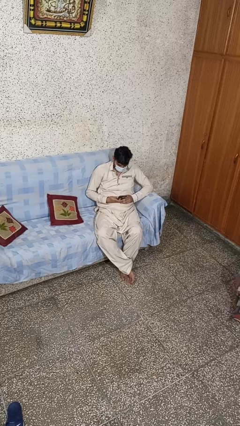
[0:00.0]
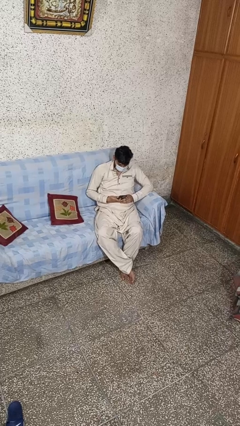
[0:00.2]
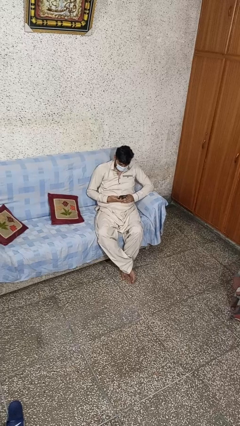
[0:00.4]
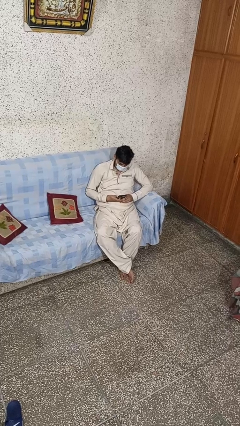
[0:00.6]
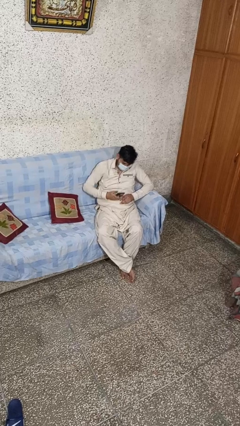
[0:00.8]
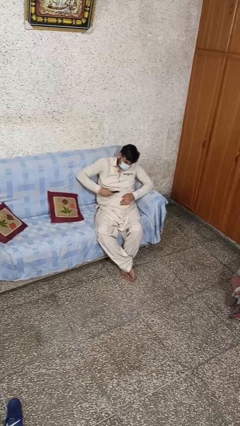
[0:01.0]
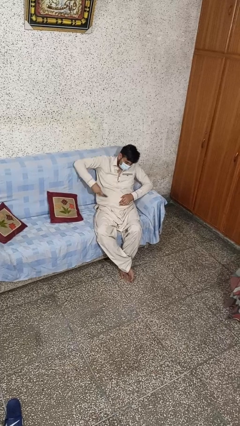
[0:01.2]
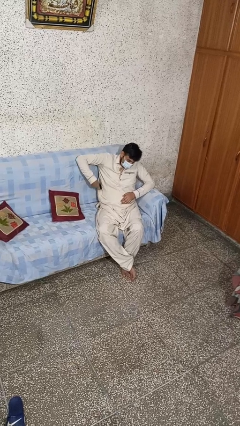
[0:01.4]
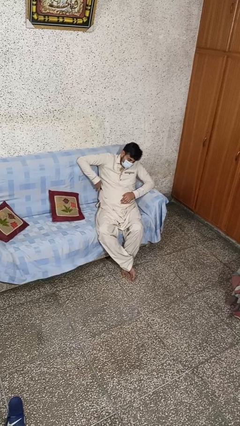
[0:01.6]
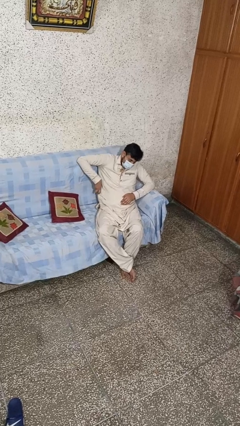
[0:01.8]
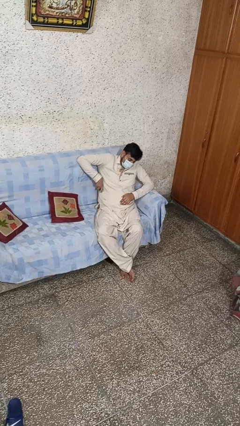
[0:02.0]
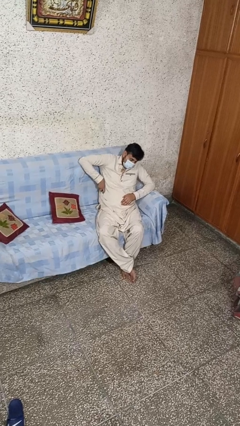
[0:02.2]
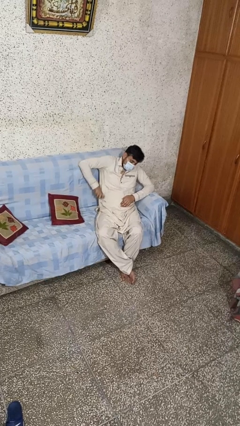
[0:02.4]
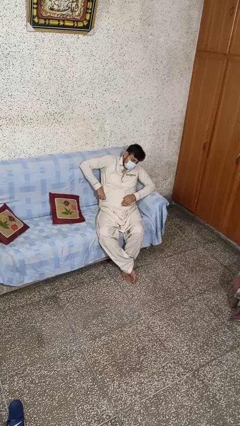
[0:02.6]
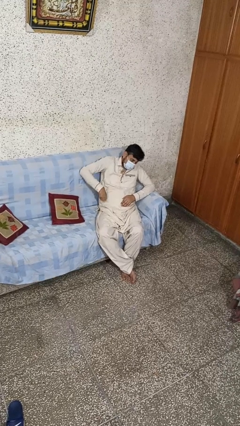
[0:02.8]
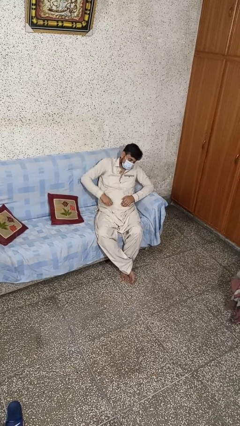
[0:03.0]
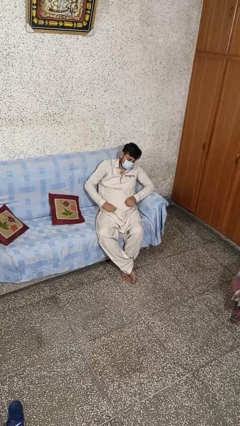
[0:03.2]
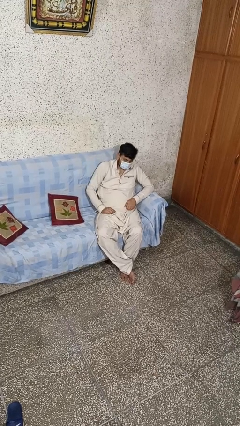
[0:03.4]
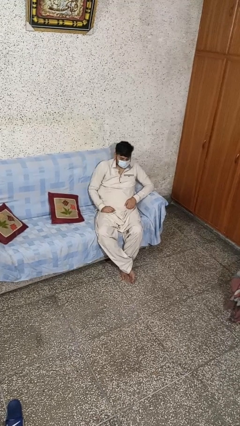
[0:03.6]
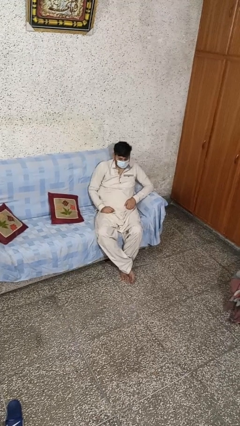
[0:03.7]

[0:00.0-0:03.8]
person puts phone into pocket

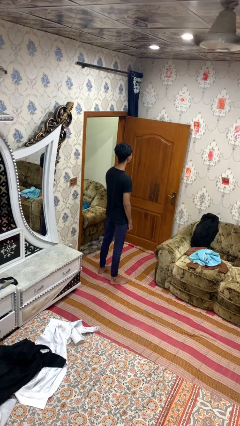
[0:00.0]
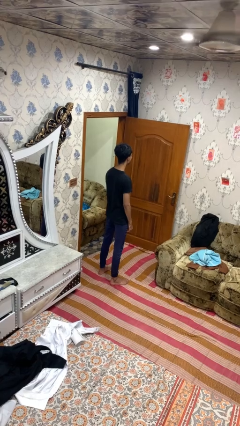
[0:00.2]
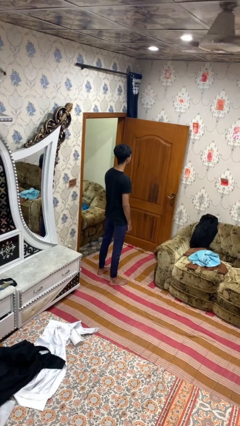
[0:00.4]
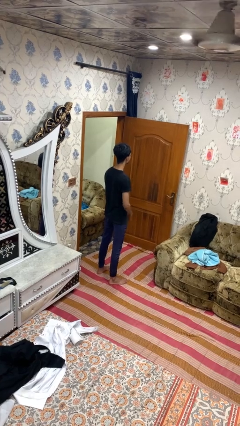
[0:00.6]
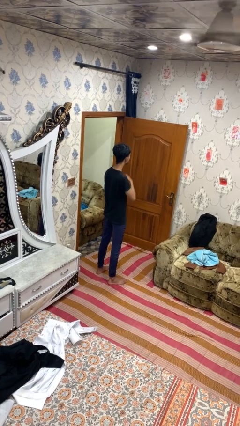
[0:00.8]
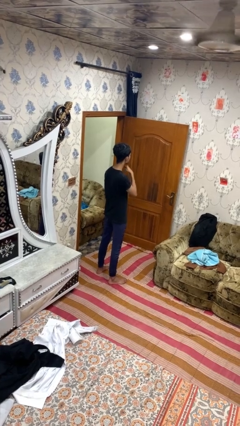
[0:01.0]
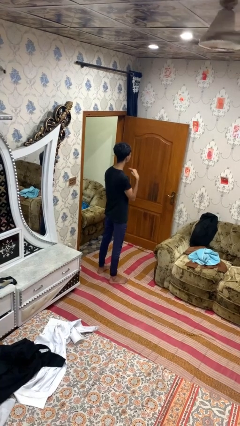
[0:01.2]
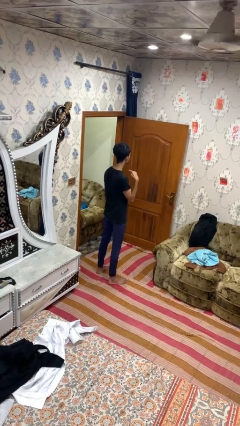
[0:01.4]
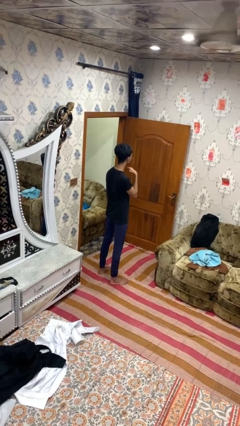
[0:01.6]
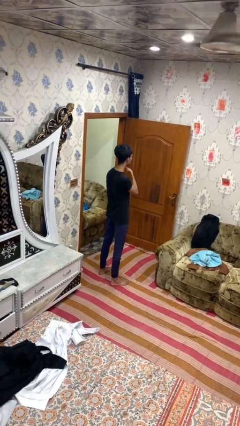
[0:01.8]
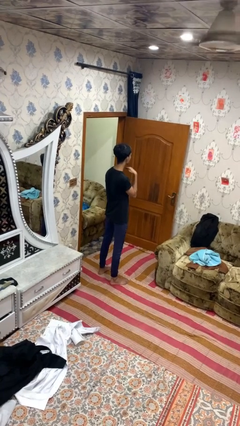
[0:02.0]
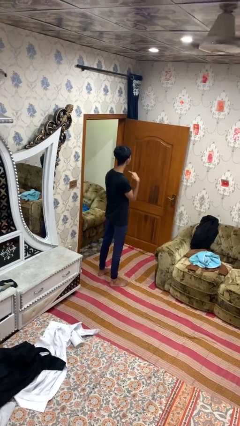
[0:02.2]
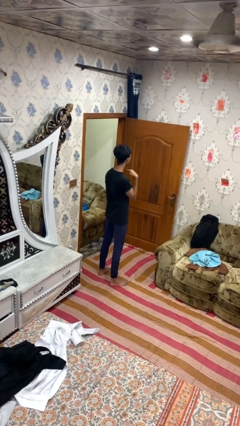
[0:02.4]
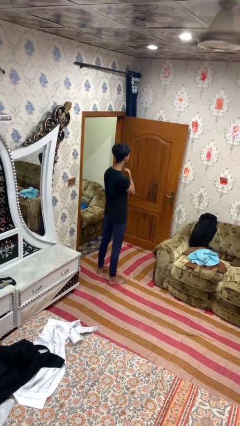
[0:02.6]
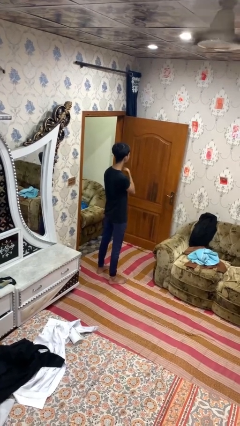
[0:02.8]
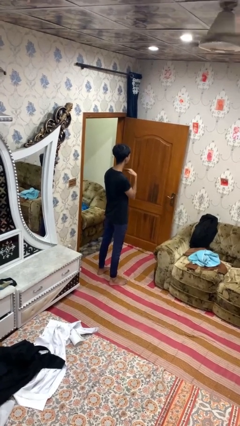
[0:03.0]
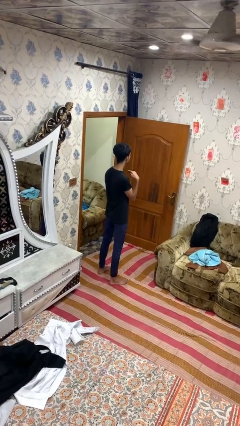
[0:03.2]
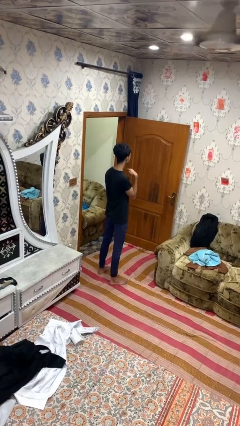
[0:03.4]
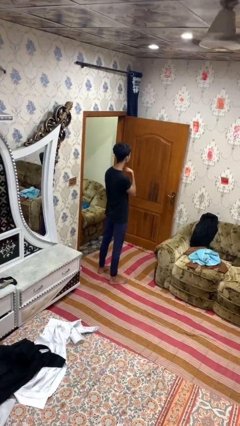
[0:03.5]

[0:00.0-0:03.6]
person gestures cut

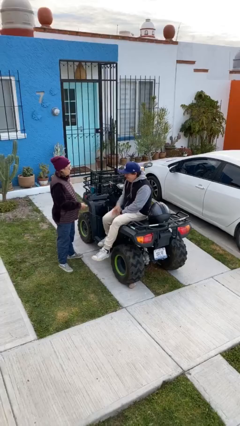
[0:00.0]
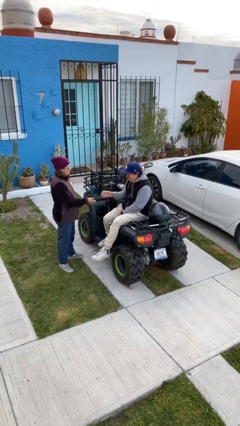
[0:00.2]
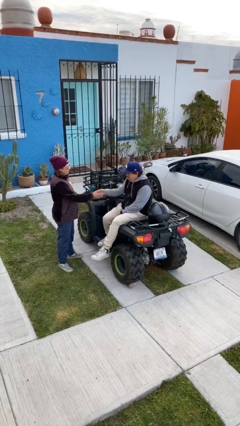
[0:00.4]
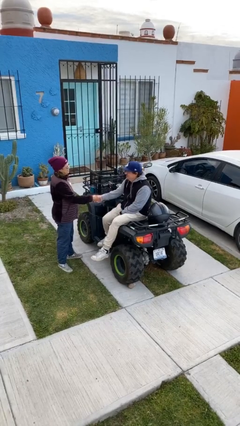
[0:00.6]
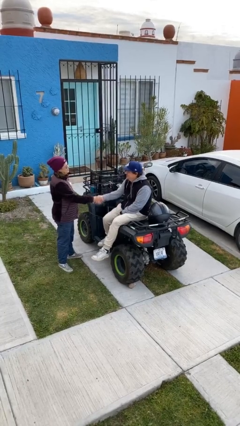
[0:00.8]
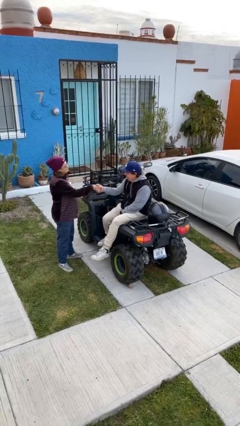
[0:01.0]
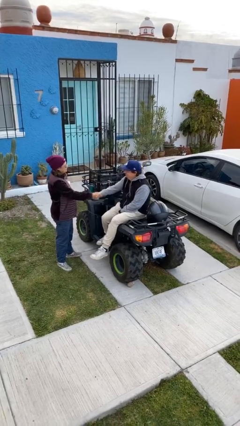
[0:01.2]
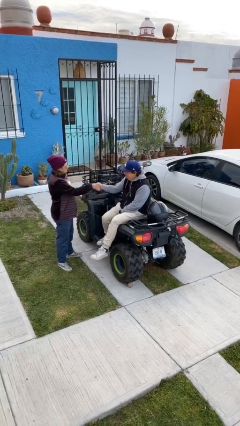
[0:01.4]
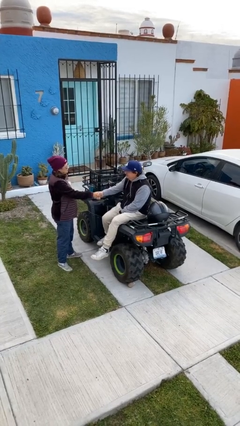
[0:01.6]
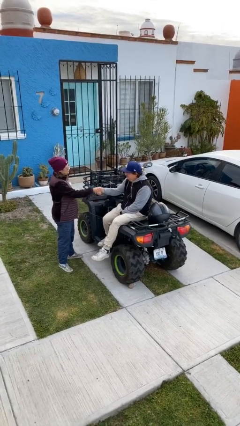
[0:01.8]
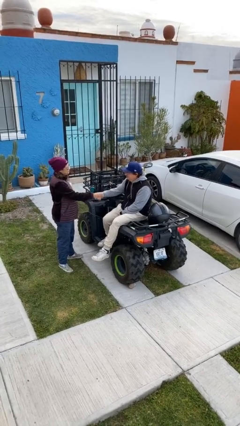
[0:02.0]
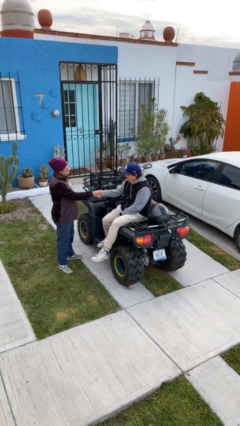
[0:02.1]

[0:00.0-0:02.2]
person shakes hand

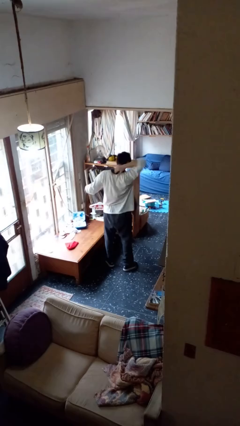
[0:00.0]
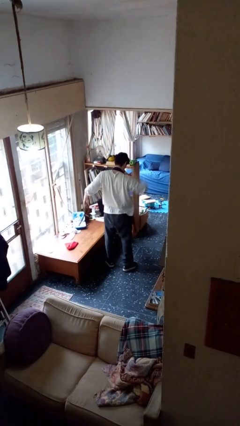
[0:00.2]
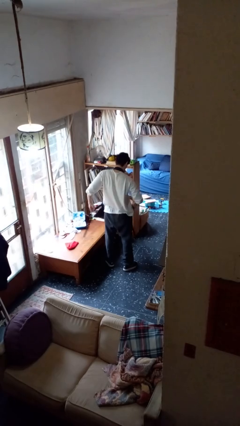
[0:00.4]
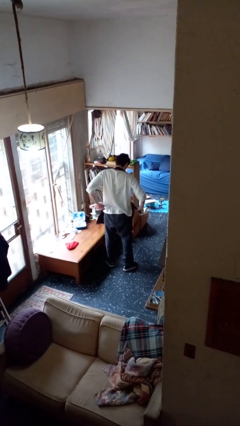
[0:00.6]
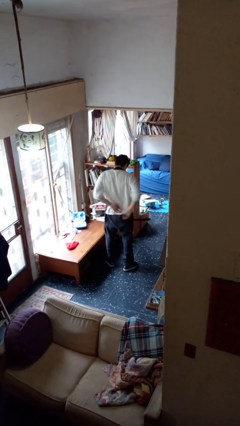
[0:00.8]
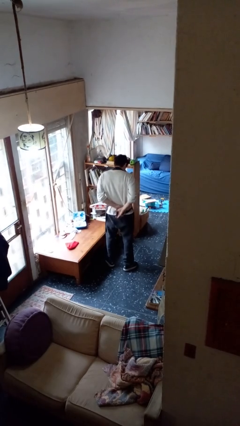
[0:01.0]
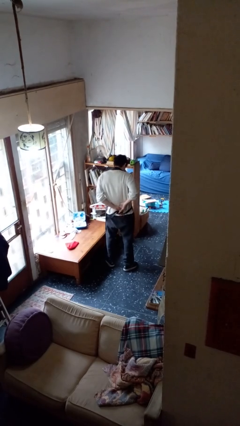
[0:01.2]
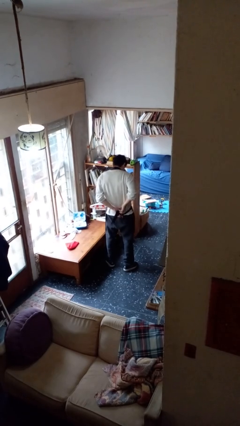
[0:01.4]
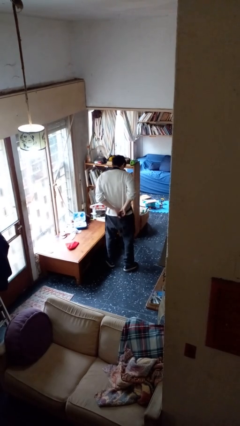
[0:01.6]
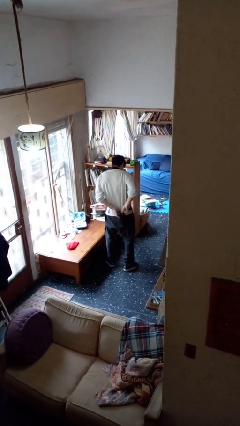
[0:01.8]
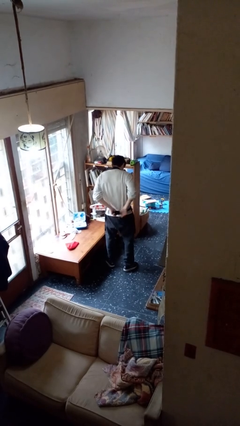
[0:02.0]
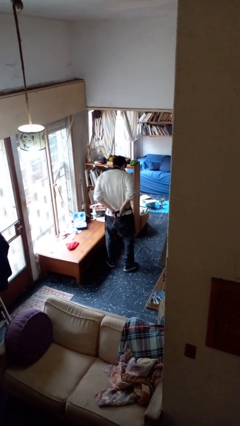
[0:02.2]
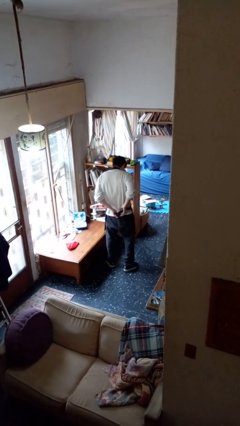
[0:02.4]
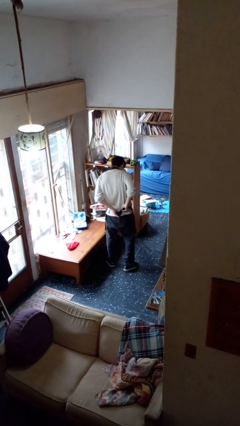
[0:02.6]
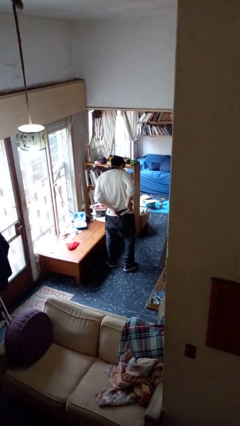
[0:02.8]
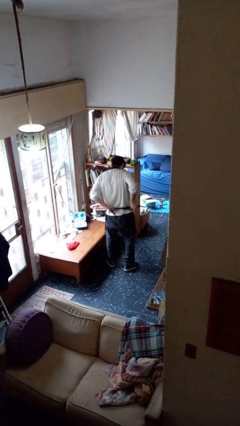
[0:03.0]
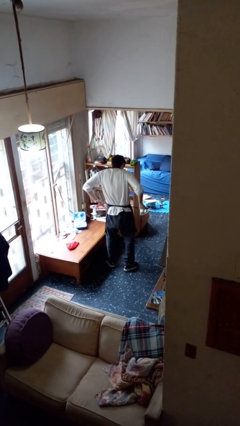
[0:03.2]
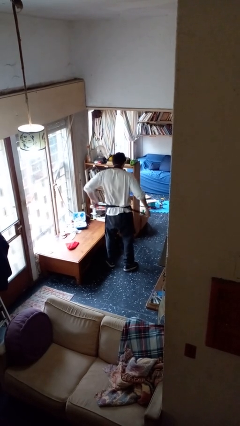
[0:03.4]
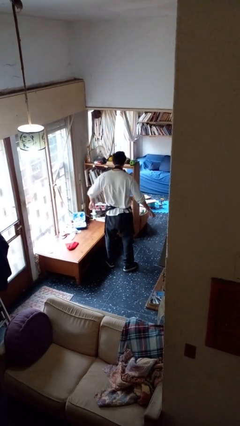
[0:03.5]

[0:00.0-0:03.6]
person puts on apron

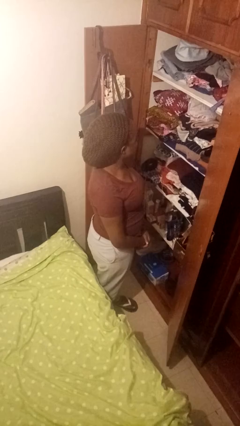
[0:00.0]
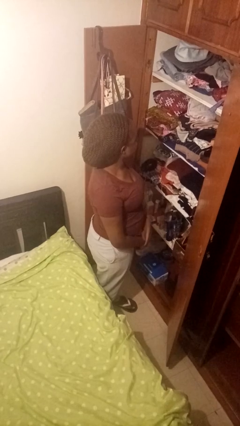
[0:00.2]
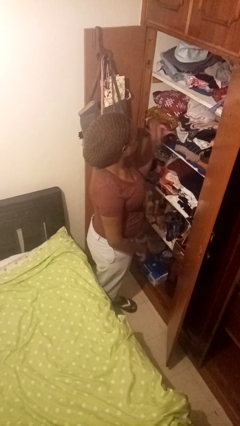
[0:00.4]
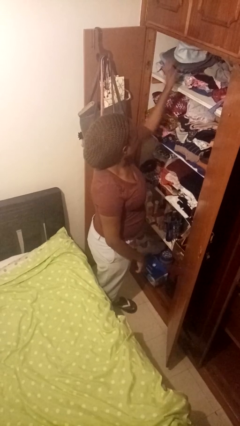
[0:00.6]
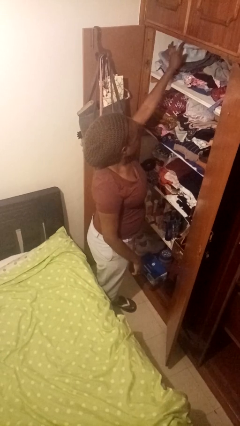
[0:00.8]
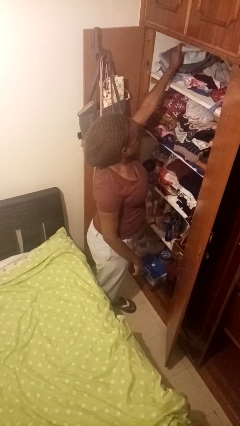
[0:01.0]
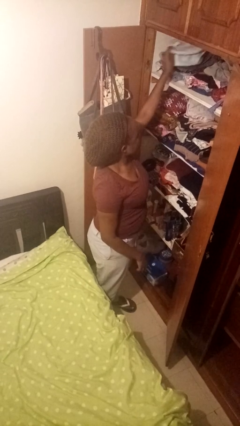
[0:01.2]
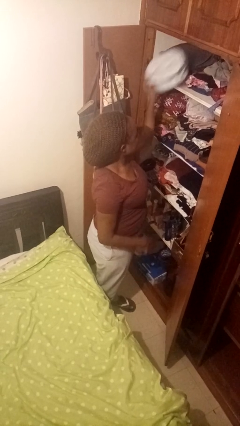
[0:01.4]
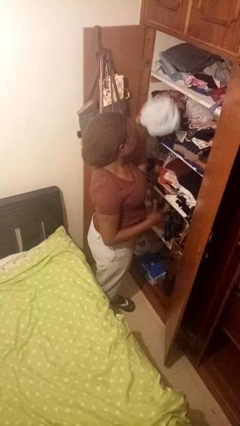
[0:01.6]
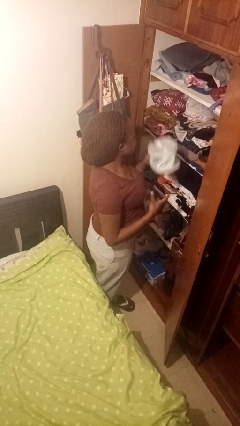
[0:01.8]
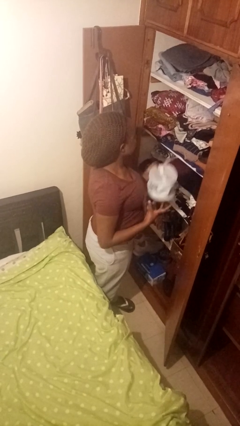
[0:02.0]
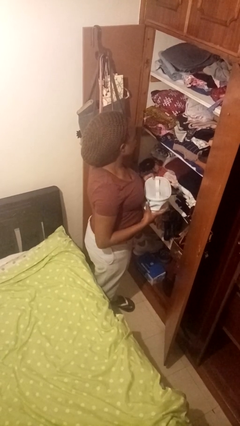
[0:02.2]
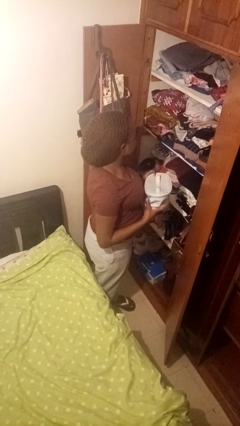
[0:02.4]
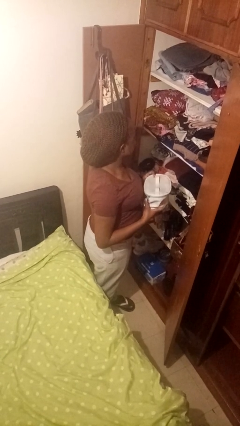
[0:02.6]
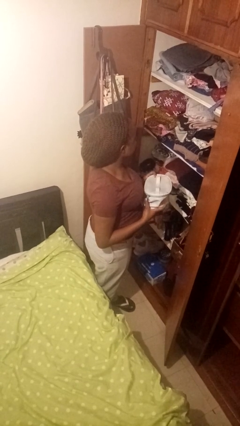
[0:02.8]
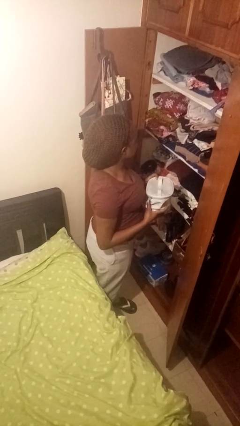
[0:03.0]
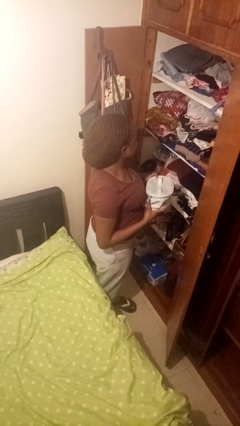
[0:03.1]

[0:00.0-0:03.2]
person picks up object from shelf

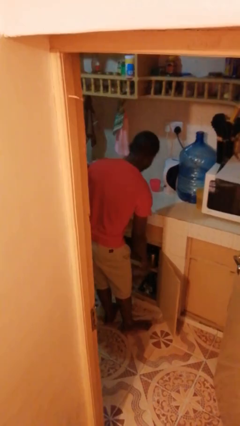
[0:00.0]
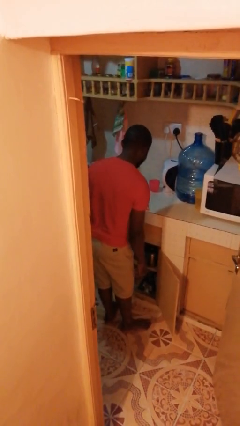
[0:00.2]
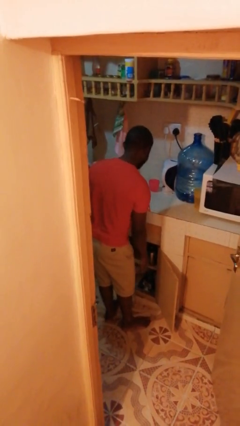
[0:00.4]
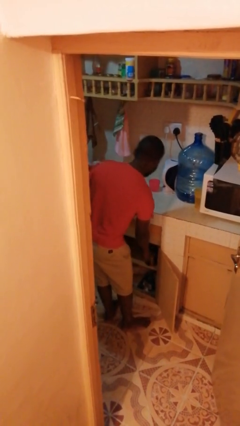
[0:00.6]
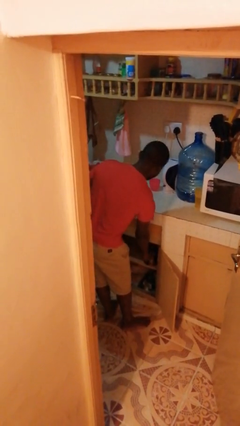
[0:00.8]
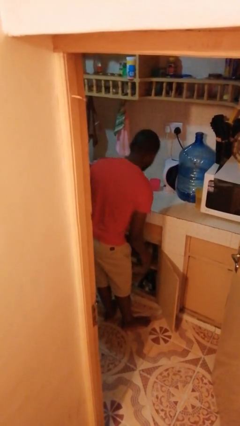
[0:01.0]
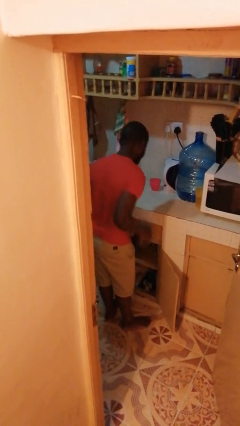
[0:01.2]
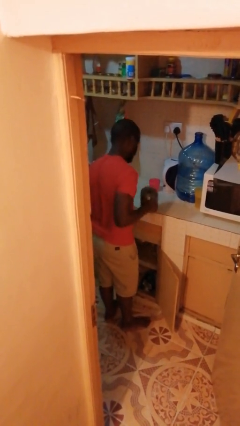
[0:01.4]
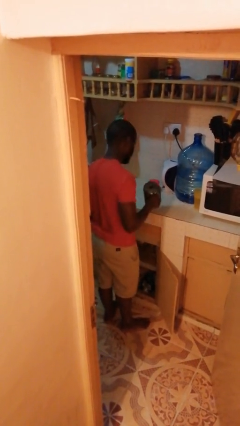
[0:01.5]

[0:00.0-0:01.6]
person takes object from cabinet
